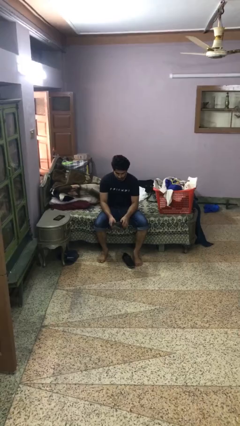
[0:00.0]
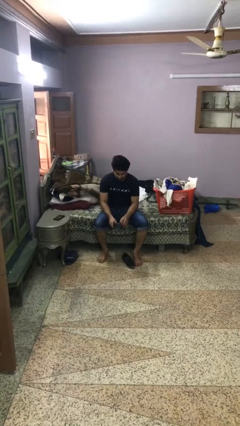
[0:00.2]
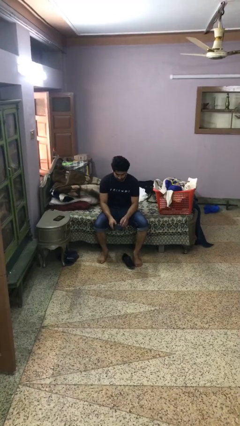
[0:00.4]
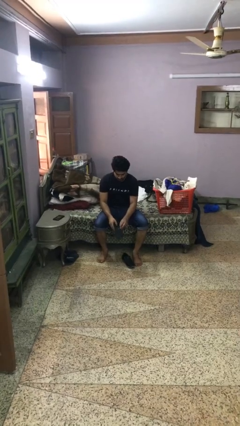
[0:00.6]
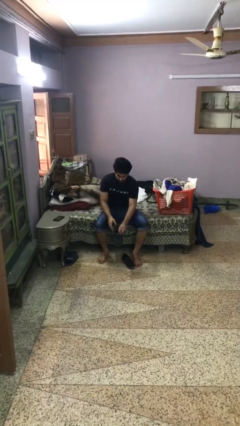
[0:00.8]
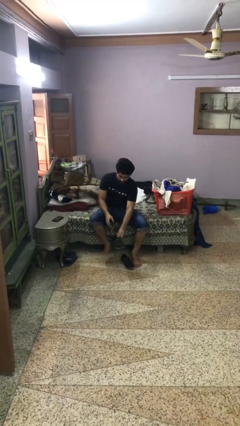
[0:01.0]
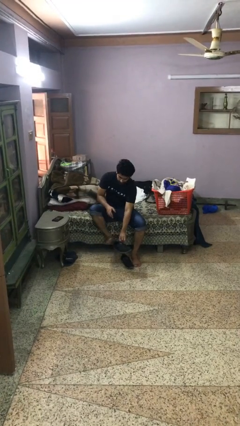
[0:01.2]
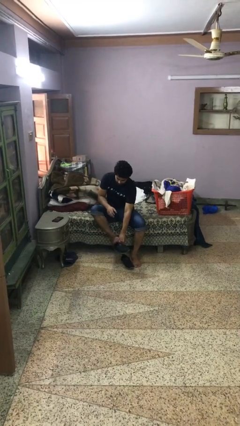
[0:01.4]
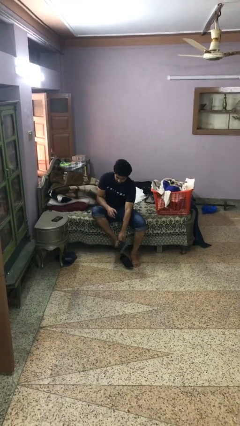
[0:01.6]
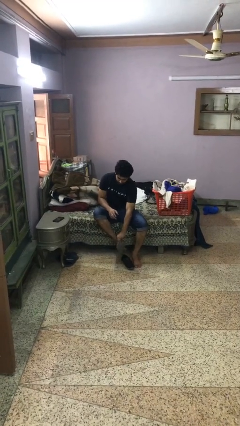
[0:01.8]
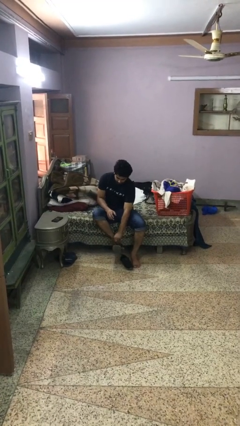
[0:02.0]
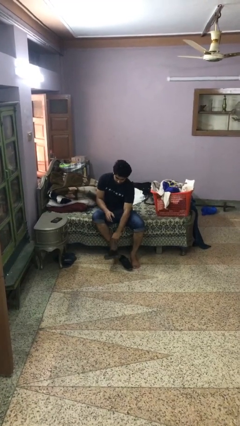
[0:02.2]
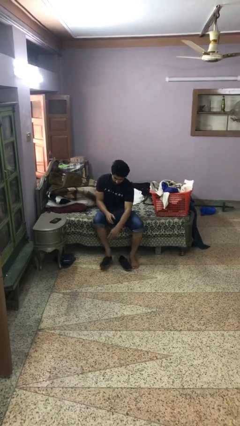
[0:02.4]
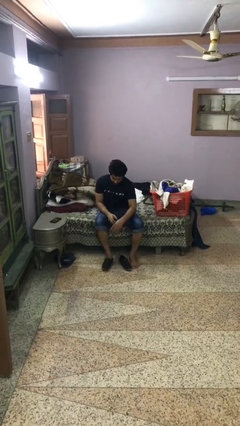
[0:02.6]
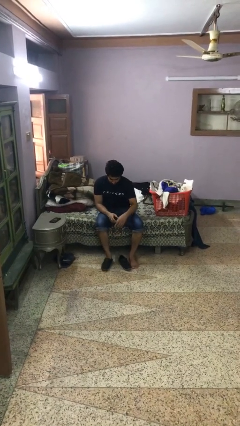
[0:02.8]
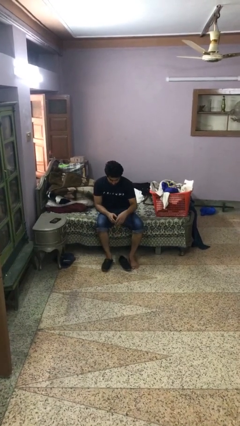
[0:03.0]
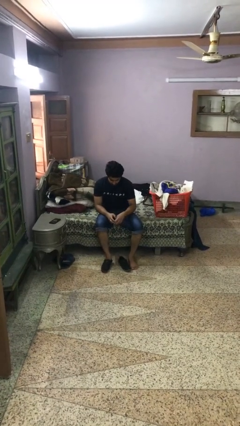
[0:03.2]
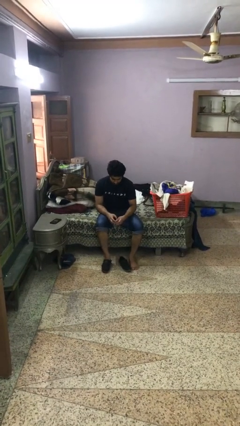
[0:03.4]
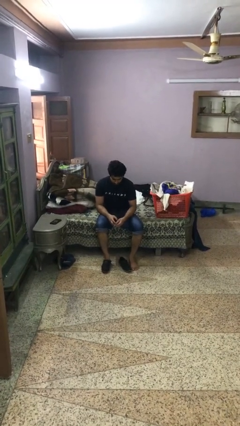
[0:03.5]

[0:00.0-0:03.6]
person puts on boots

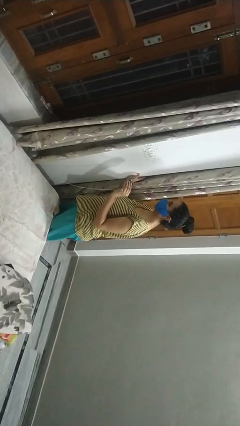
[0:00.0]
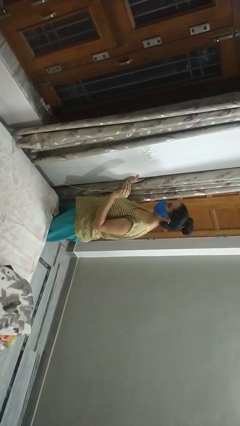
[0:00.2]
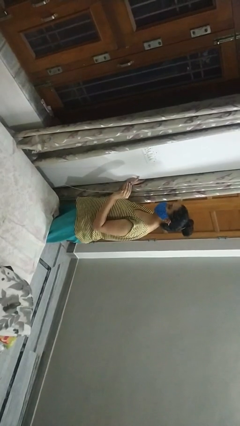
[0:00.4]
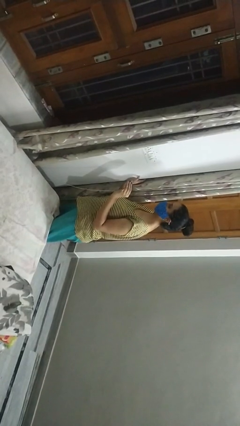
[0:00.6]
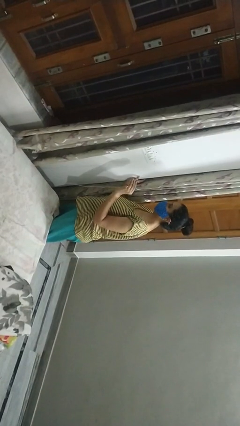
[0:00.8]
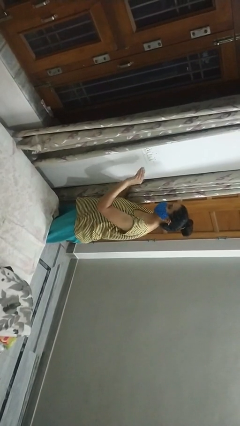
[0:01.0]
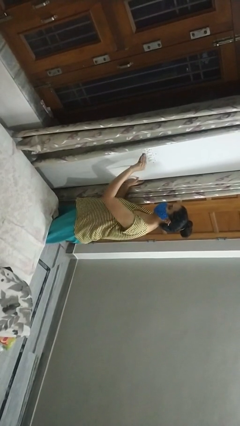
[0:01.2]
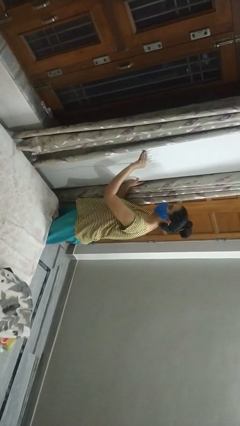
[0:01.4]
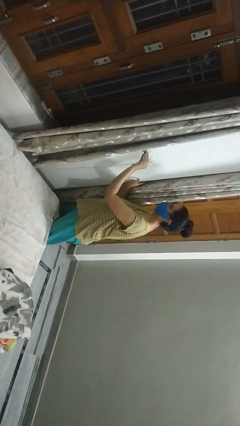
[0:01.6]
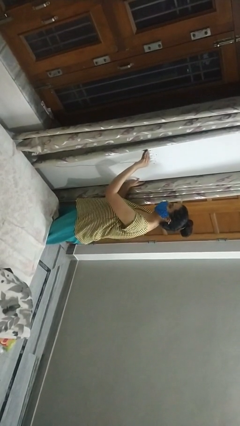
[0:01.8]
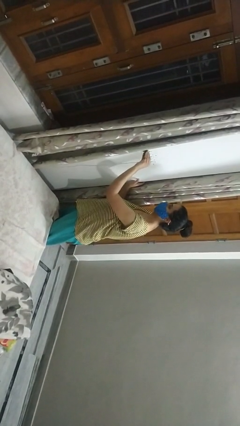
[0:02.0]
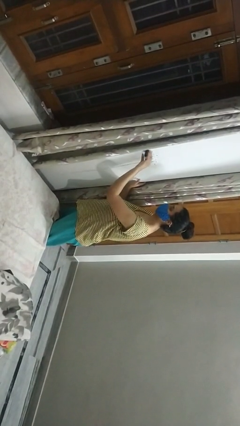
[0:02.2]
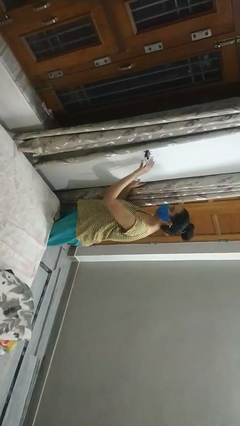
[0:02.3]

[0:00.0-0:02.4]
person plugs into electrical socket

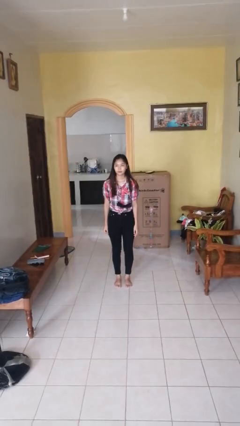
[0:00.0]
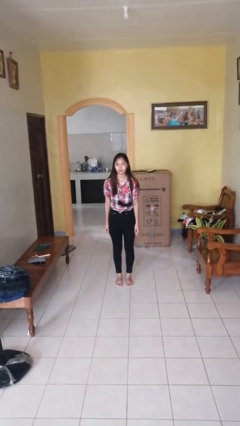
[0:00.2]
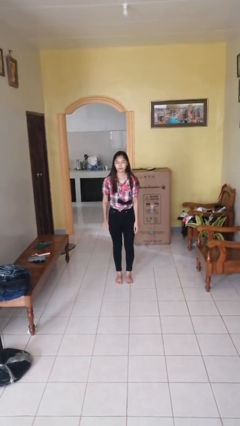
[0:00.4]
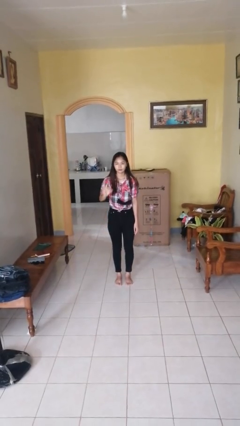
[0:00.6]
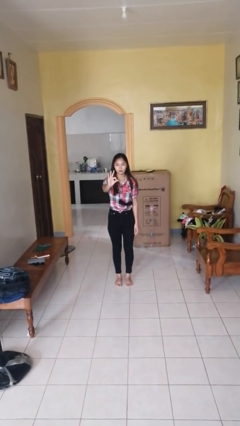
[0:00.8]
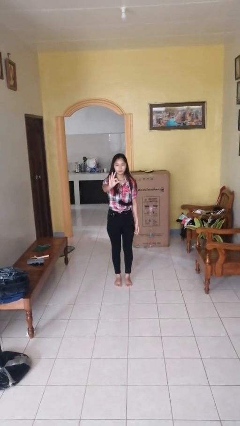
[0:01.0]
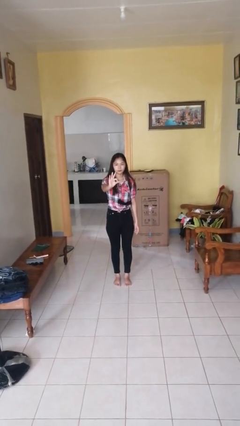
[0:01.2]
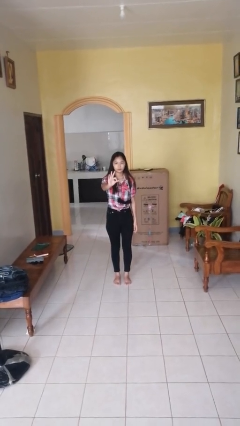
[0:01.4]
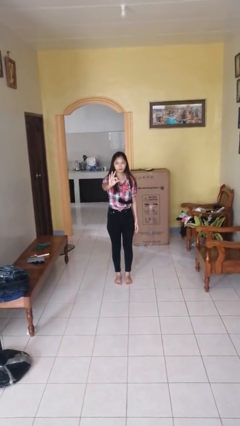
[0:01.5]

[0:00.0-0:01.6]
person gestures number three

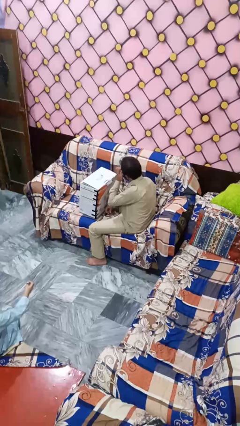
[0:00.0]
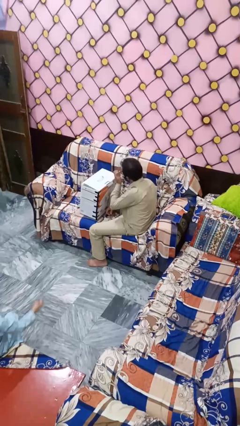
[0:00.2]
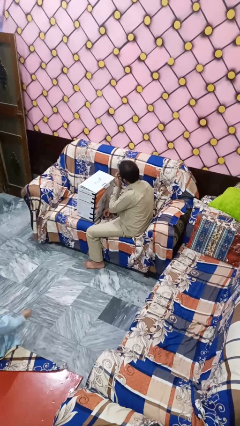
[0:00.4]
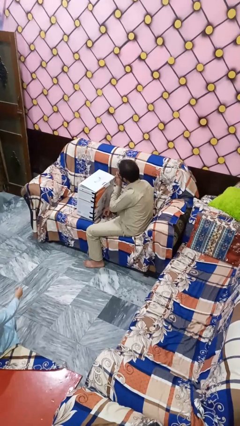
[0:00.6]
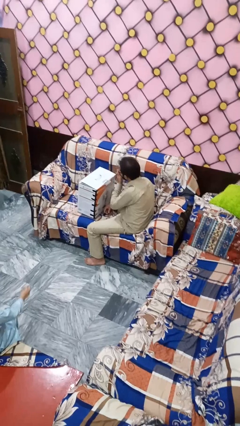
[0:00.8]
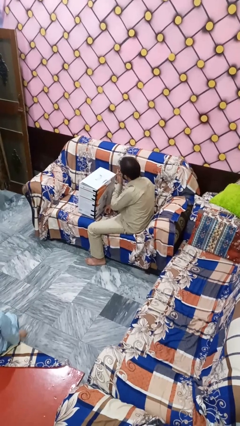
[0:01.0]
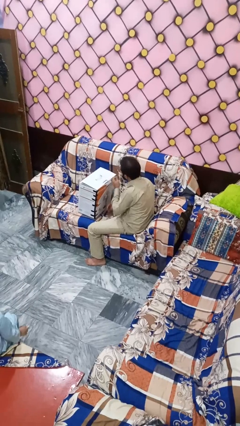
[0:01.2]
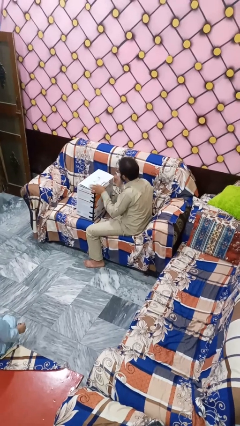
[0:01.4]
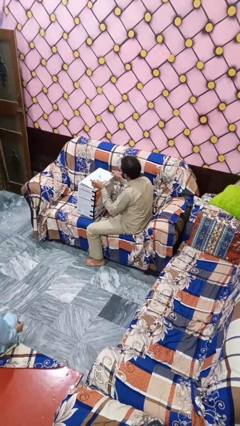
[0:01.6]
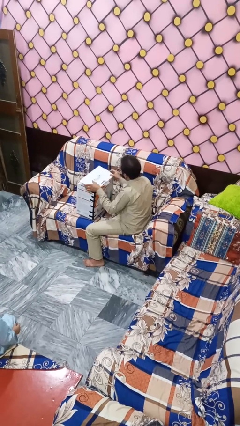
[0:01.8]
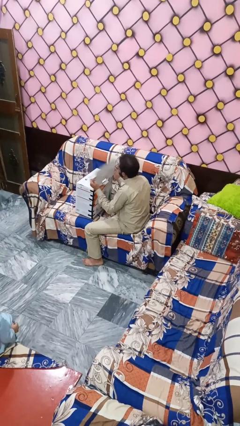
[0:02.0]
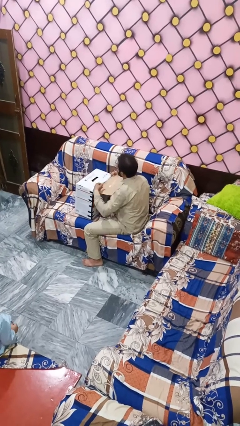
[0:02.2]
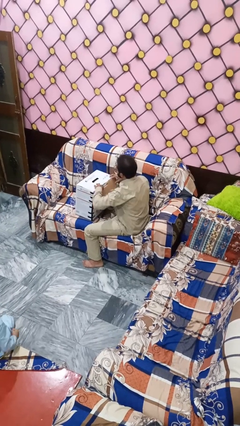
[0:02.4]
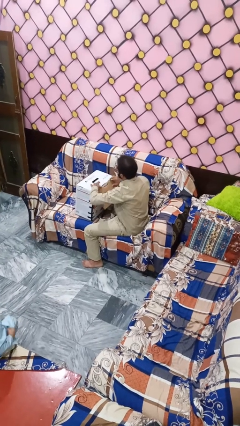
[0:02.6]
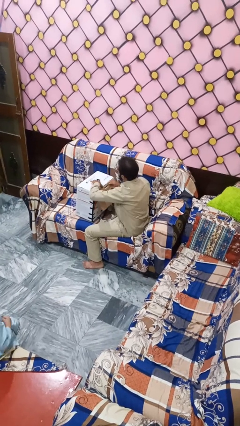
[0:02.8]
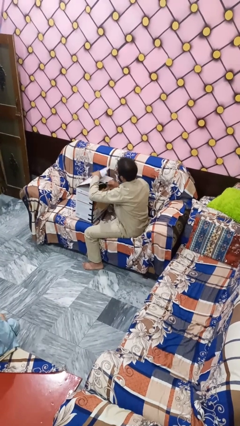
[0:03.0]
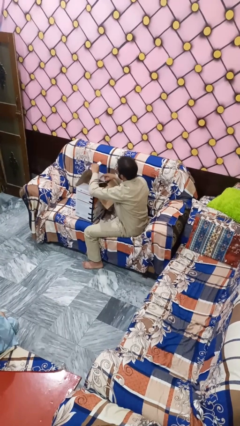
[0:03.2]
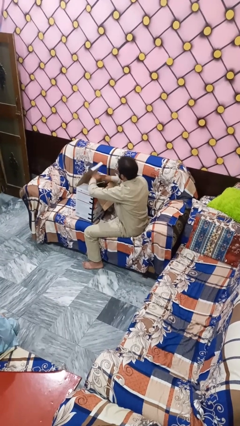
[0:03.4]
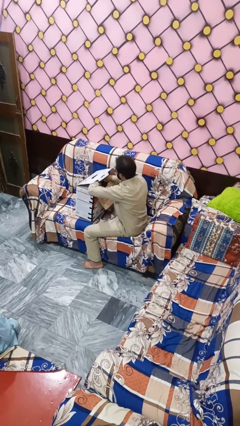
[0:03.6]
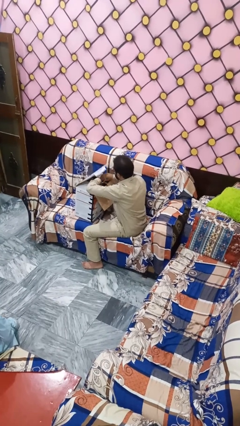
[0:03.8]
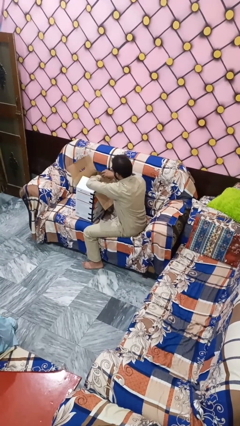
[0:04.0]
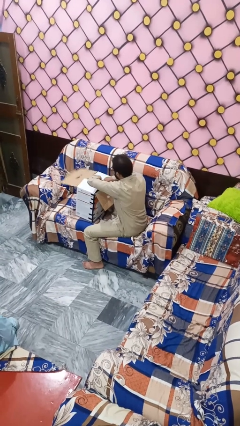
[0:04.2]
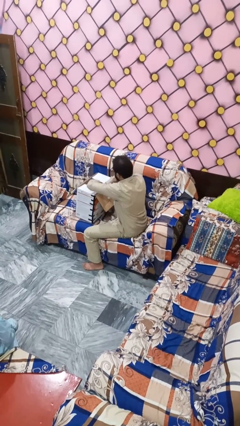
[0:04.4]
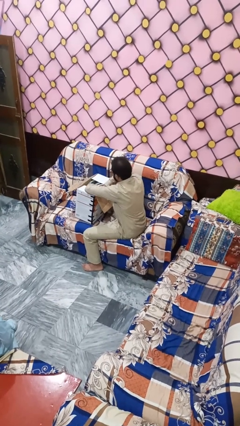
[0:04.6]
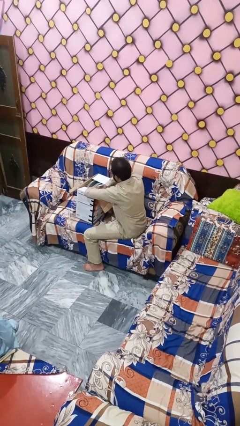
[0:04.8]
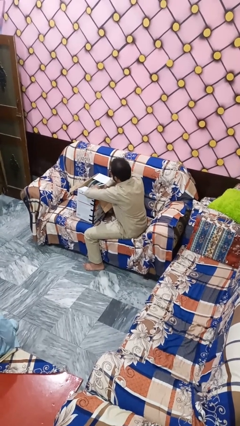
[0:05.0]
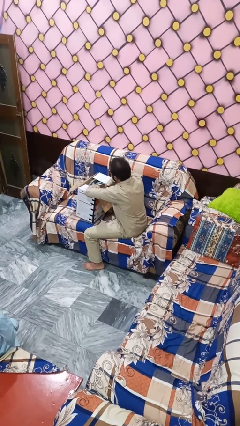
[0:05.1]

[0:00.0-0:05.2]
person searches in box

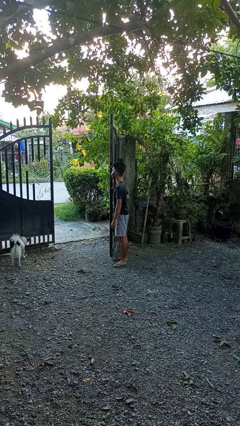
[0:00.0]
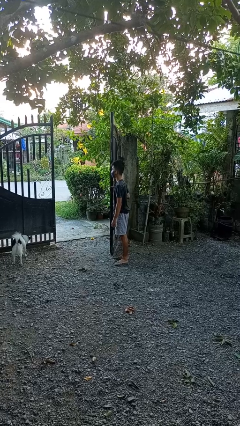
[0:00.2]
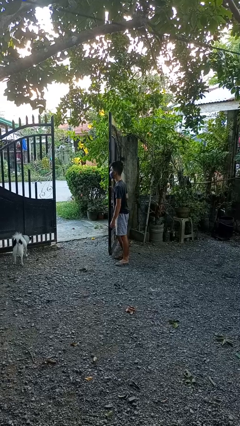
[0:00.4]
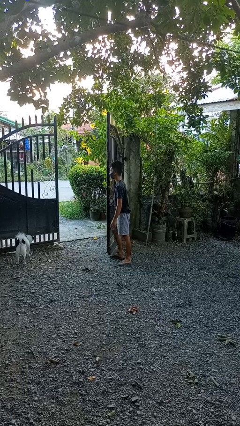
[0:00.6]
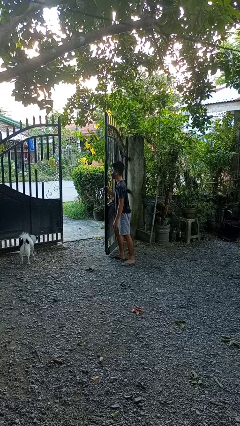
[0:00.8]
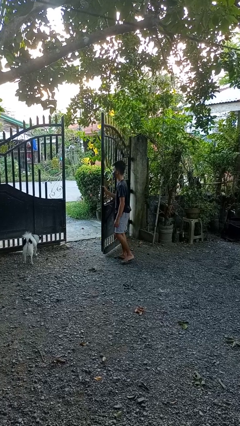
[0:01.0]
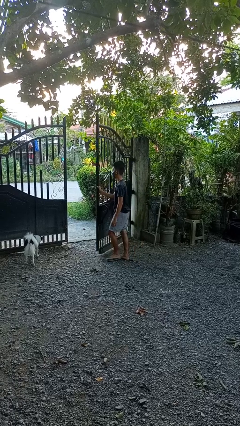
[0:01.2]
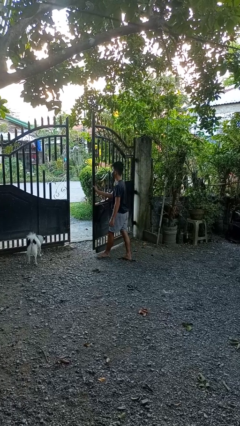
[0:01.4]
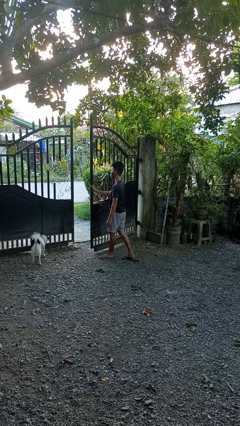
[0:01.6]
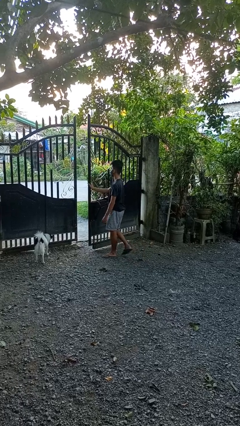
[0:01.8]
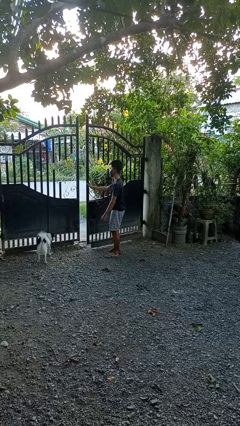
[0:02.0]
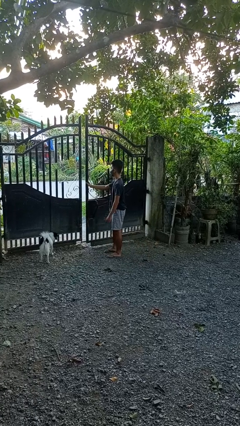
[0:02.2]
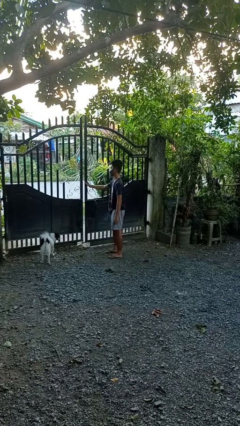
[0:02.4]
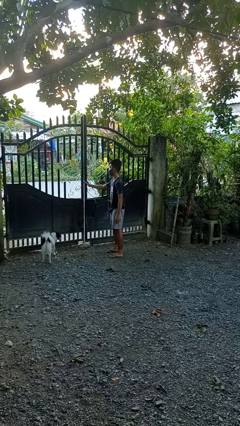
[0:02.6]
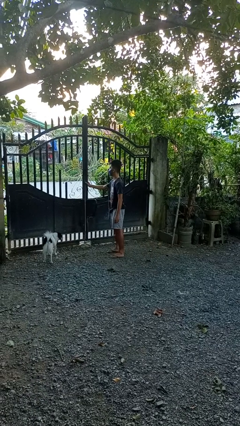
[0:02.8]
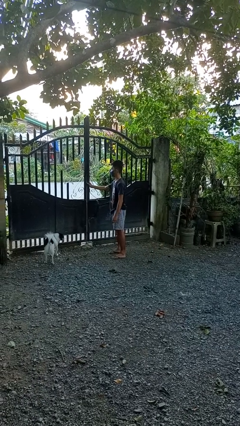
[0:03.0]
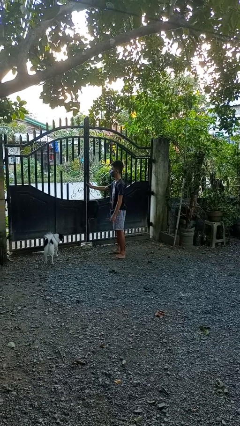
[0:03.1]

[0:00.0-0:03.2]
person closes gate

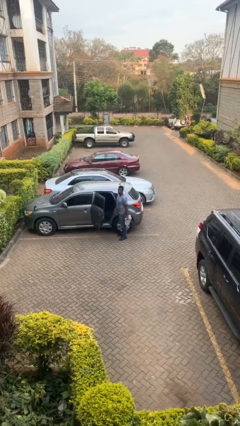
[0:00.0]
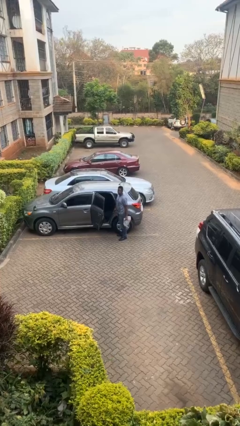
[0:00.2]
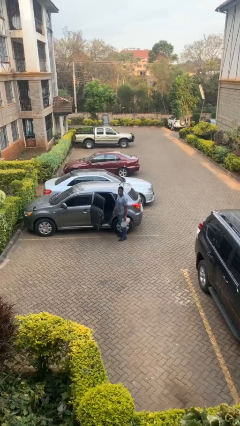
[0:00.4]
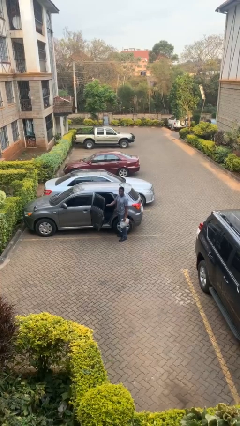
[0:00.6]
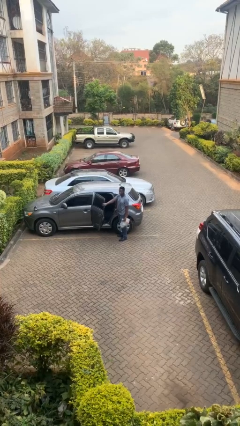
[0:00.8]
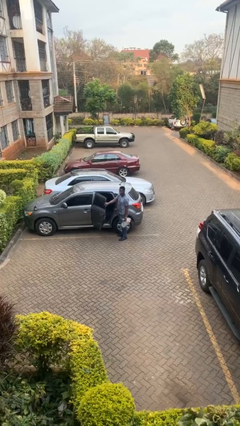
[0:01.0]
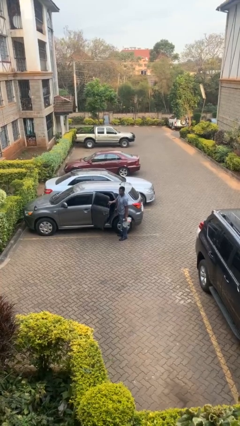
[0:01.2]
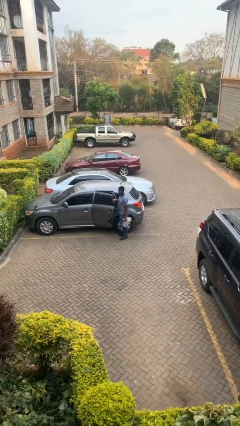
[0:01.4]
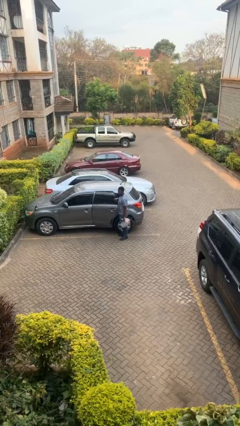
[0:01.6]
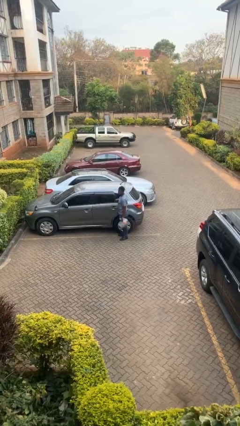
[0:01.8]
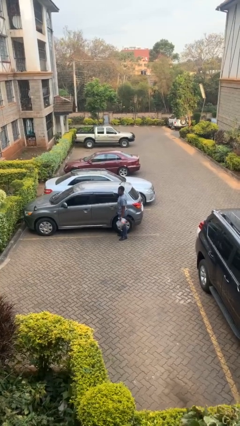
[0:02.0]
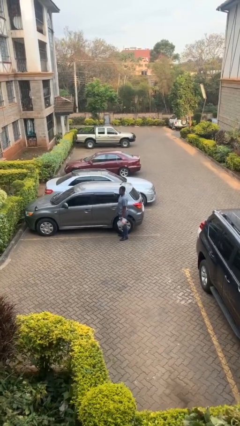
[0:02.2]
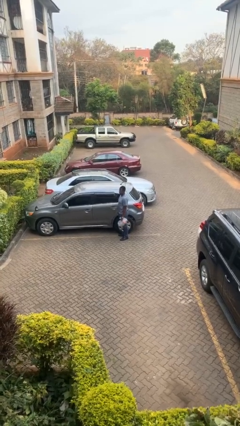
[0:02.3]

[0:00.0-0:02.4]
person closes car door
